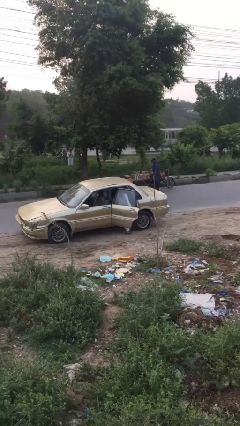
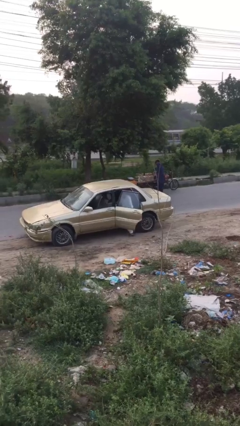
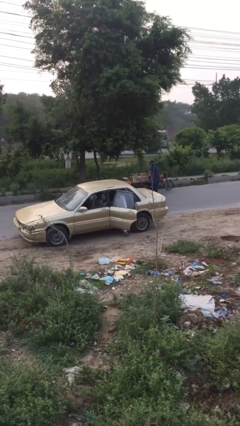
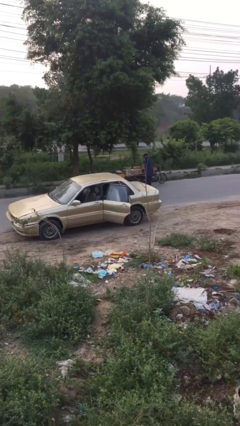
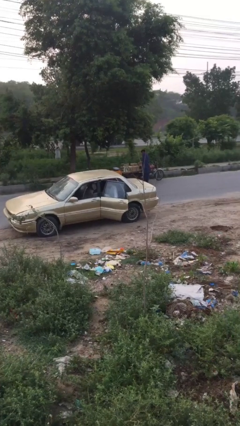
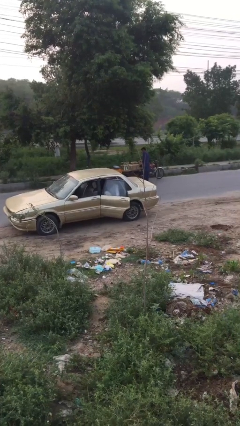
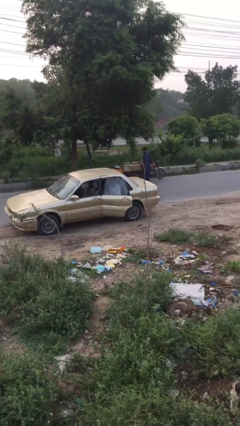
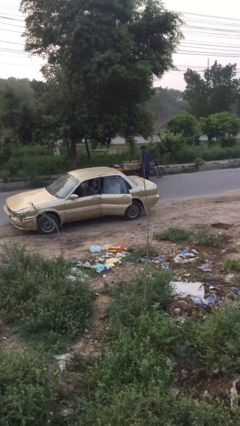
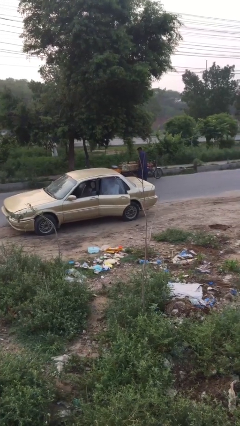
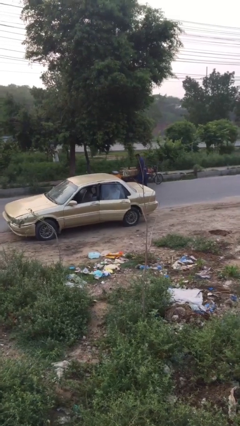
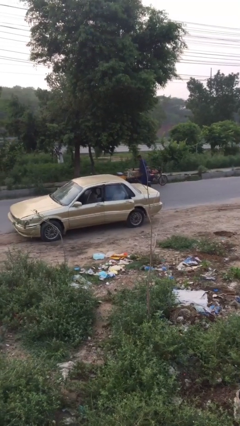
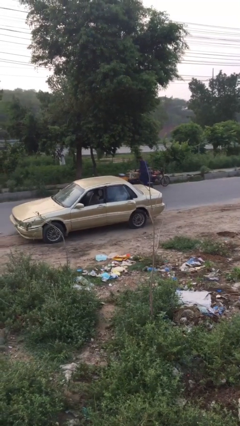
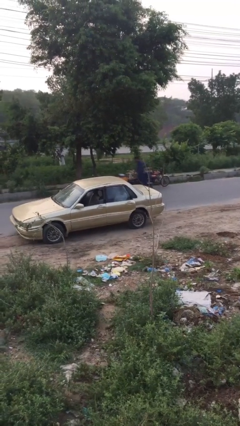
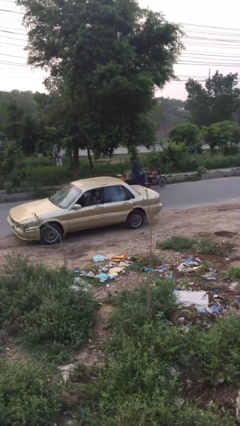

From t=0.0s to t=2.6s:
person closes car door

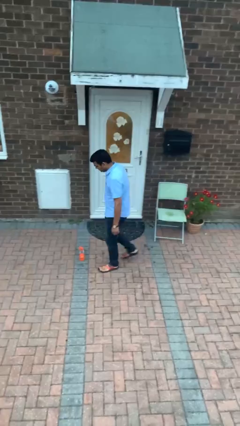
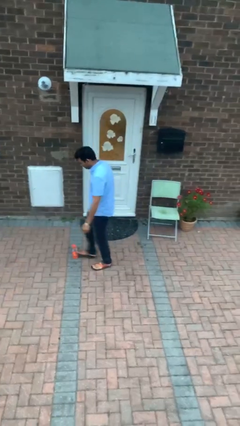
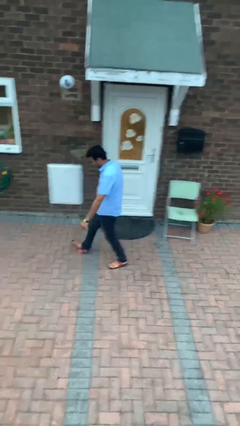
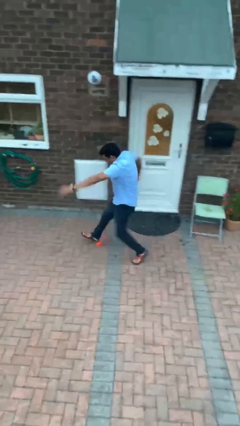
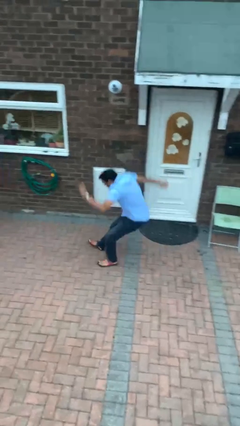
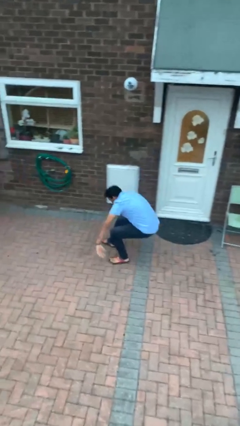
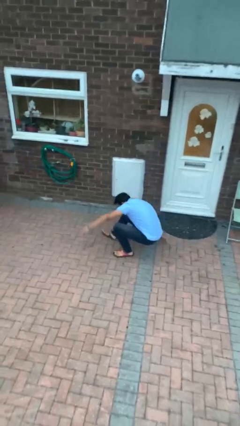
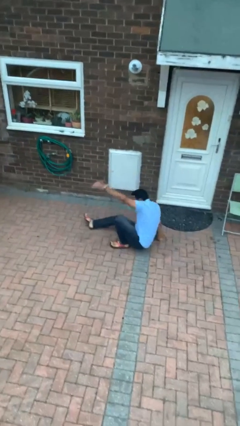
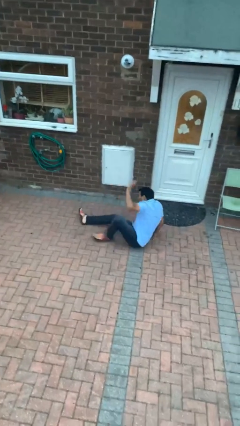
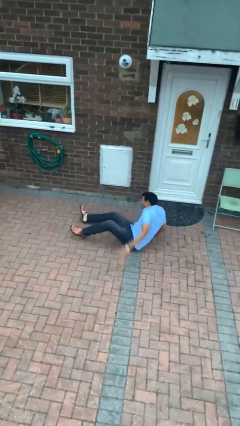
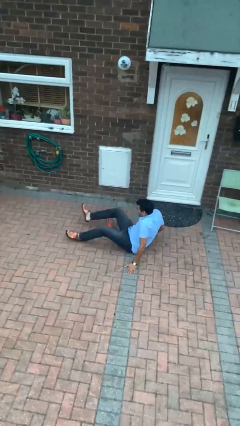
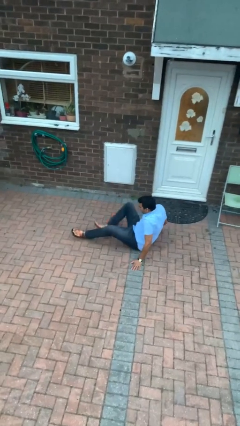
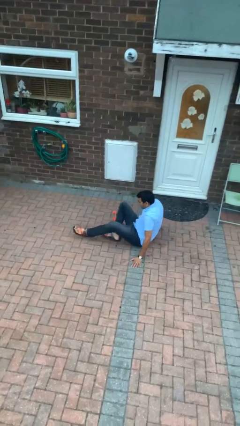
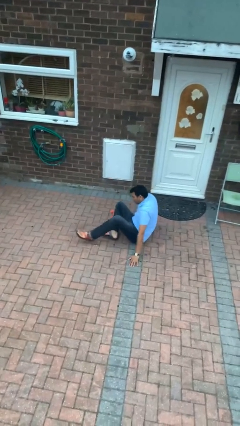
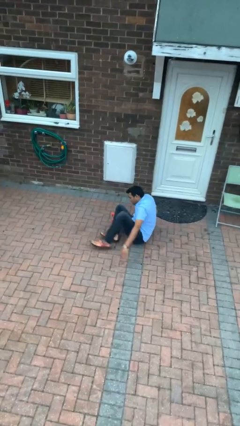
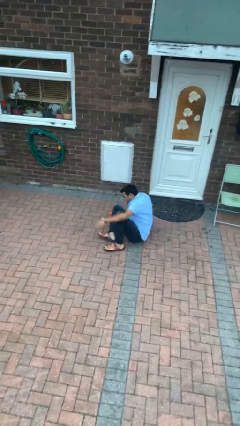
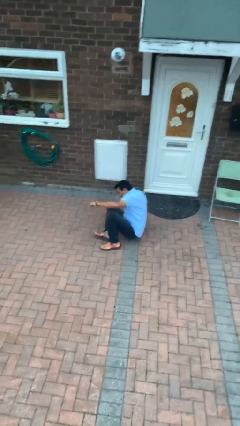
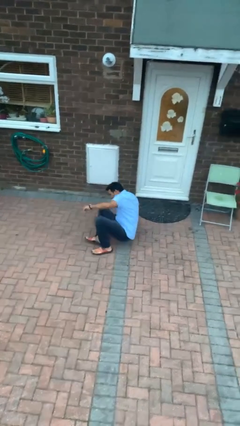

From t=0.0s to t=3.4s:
person trips on object on floor

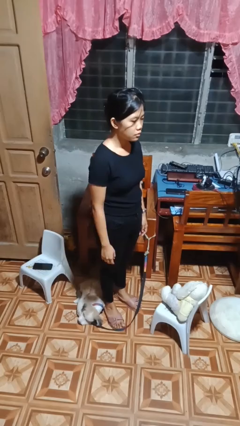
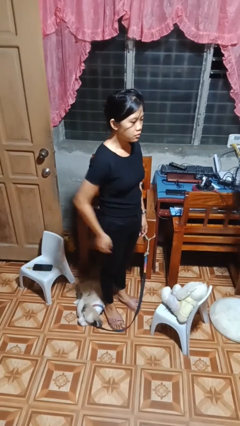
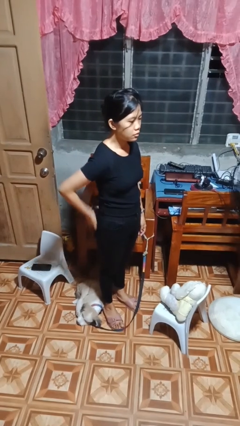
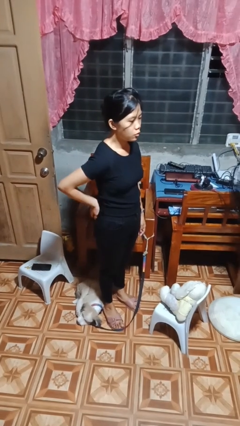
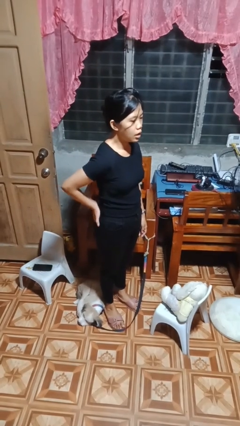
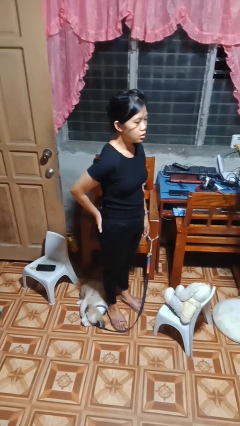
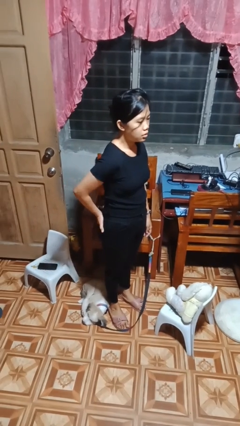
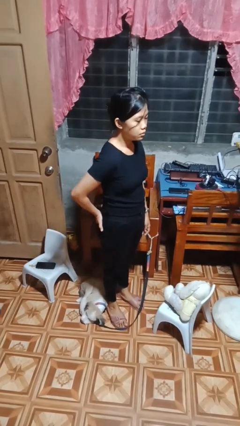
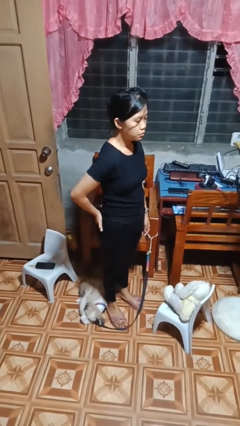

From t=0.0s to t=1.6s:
person puts hands in back pockets

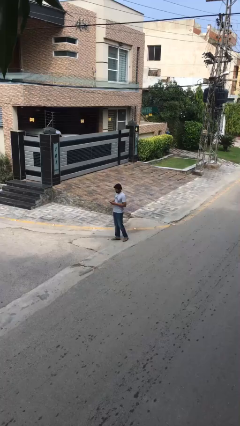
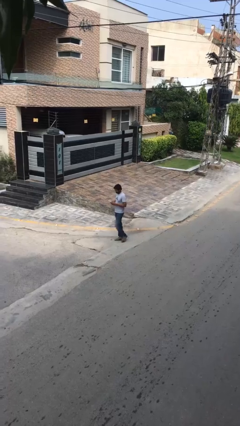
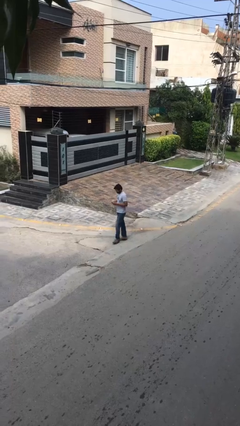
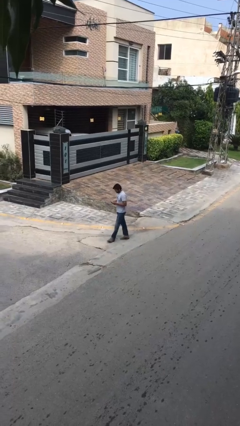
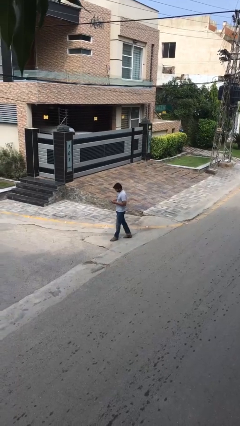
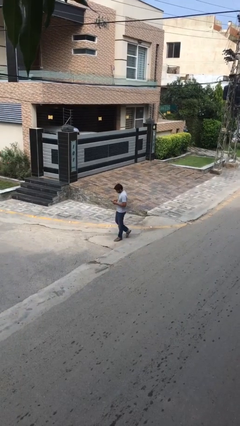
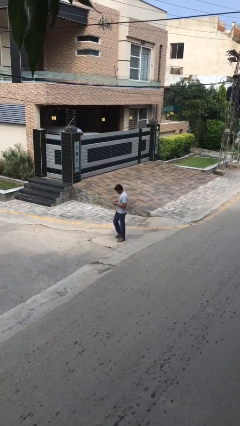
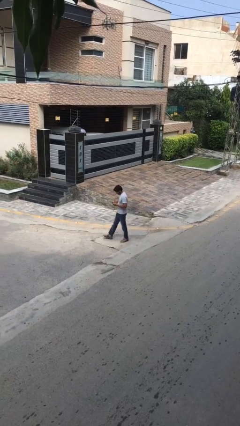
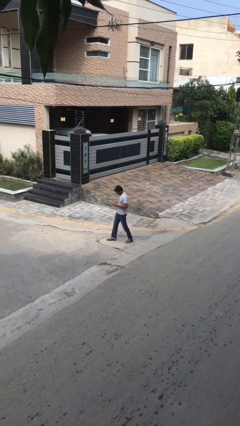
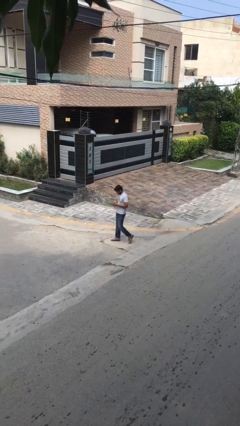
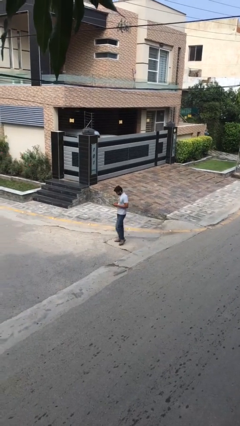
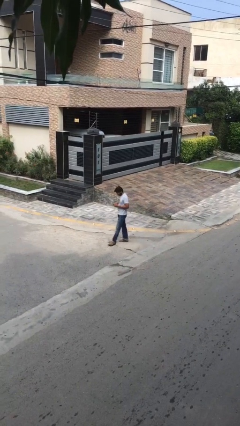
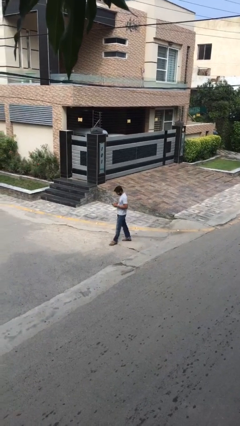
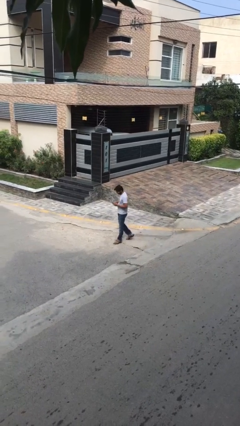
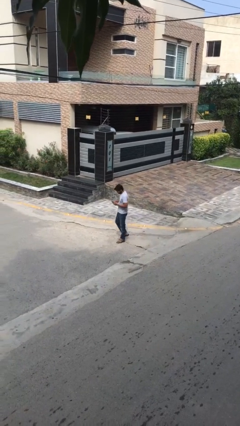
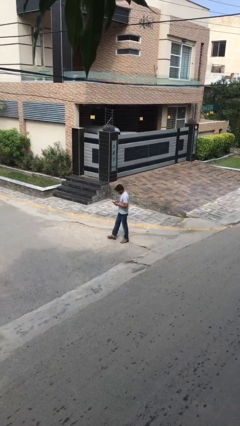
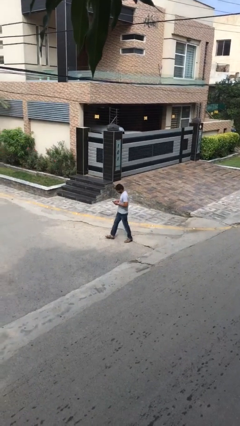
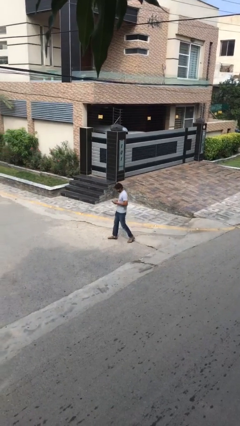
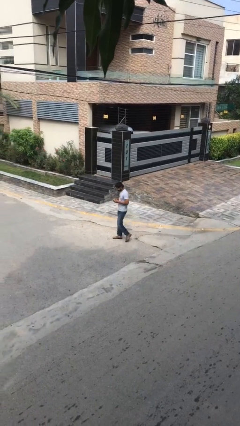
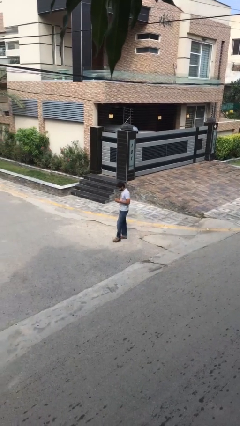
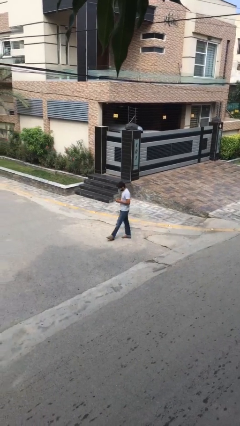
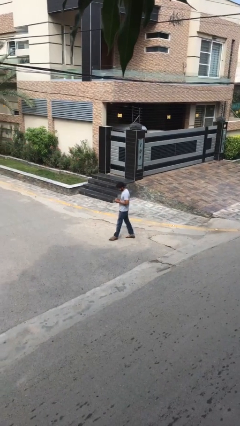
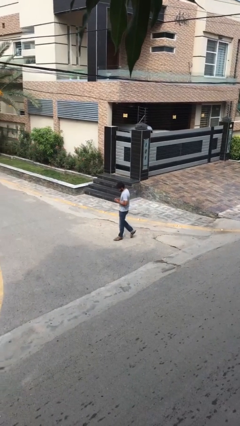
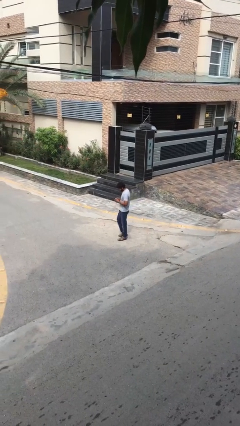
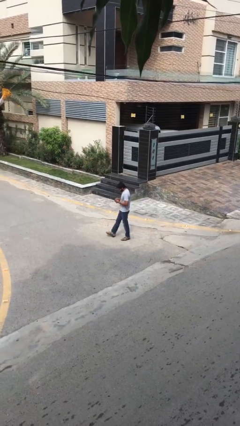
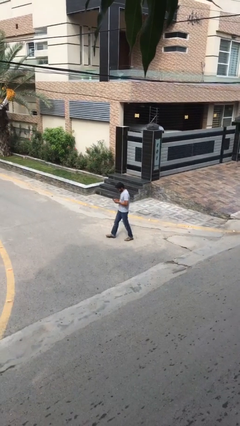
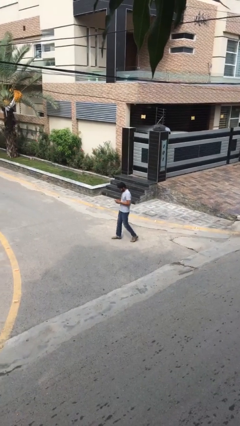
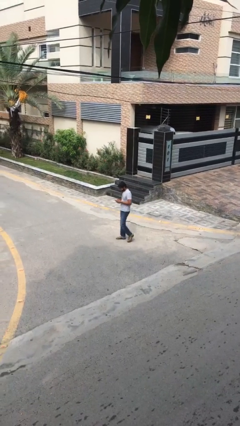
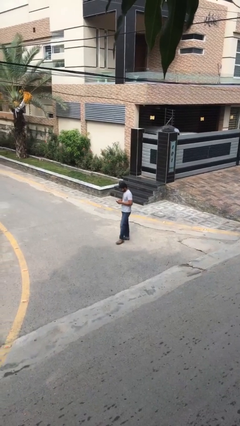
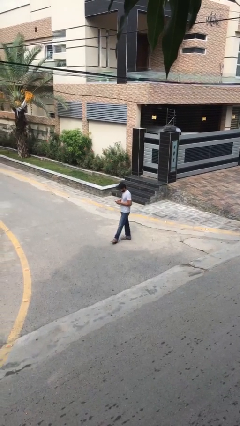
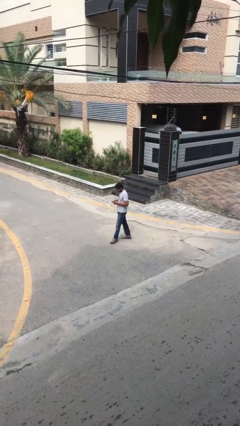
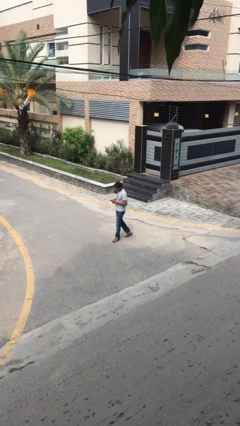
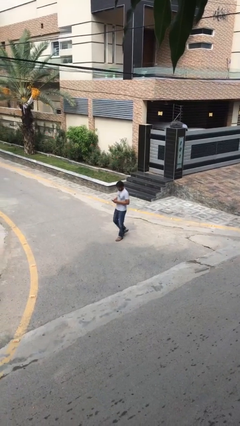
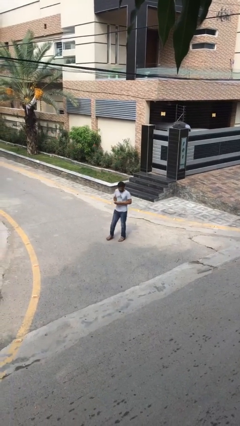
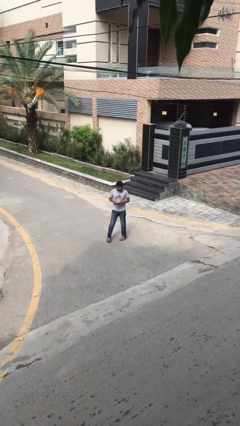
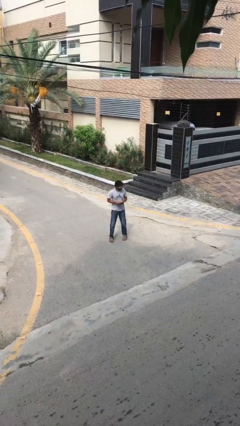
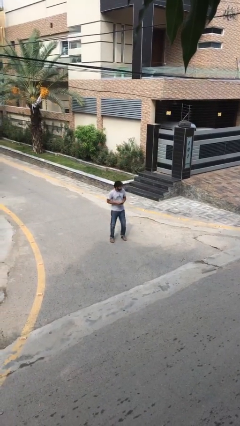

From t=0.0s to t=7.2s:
person texts on phone

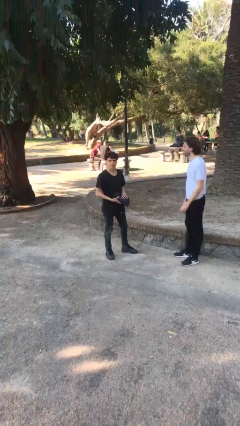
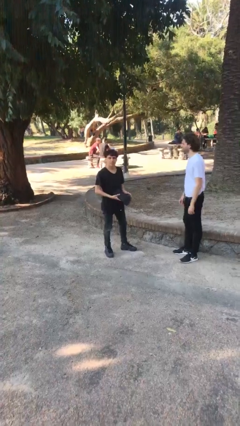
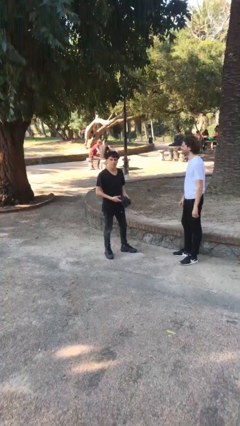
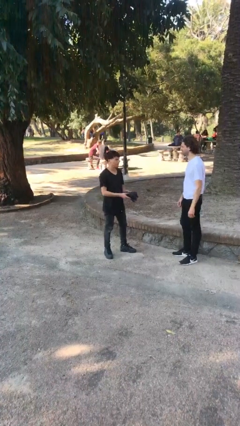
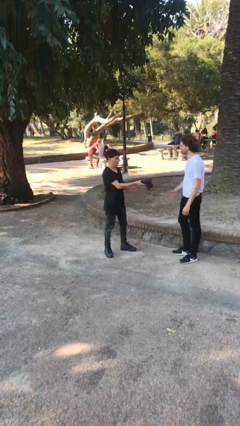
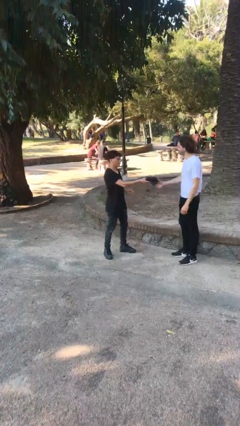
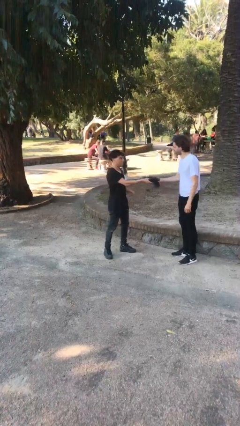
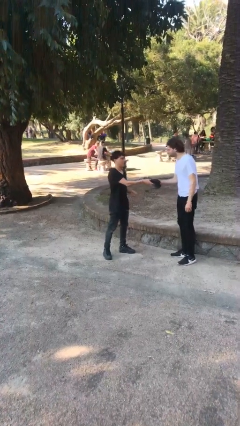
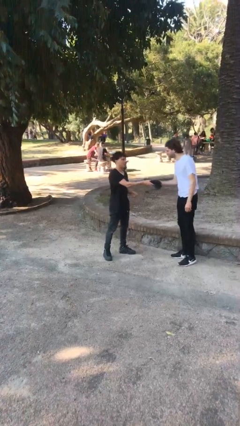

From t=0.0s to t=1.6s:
person transfers object to person

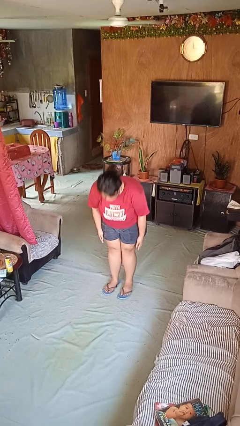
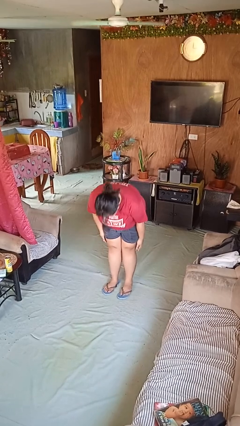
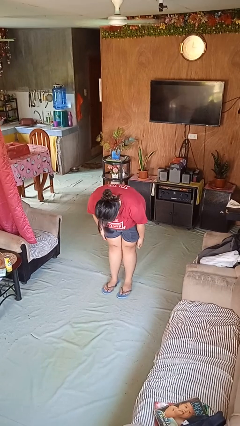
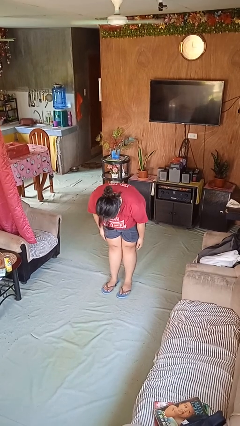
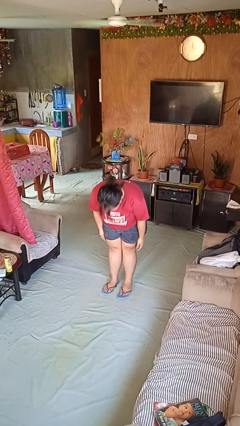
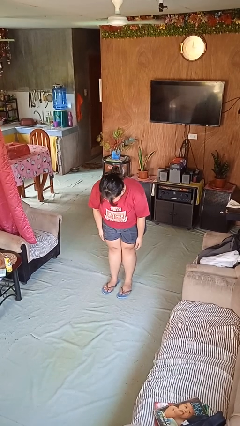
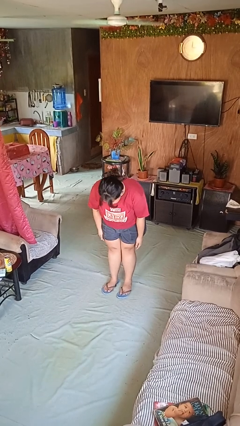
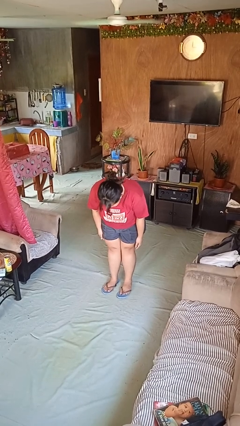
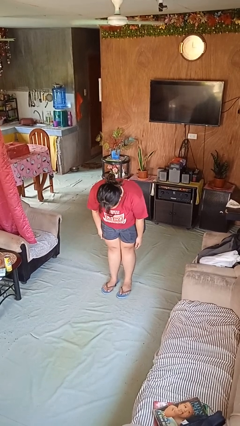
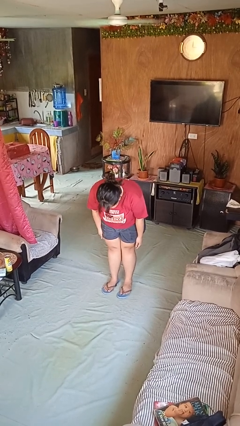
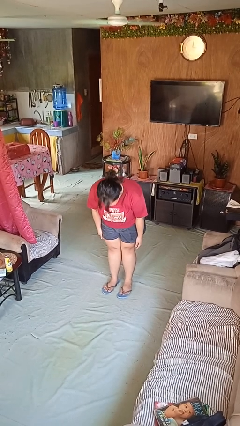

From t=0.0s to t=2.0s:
person bows
